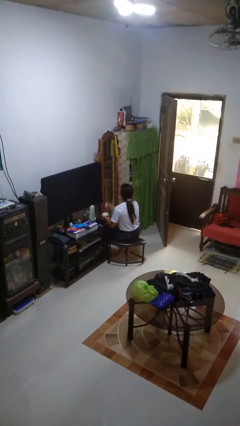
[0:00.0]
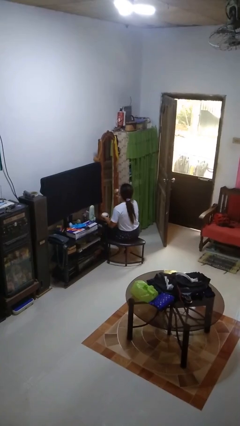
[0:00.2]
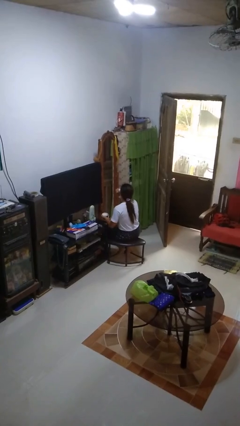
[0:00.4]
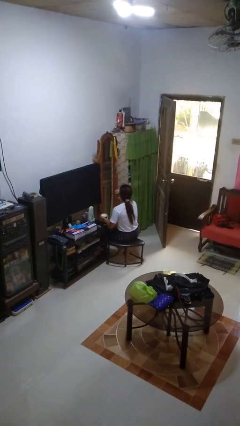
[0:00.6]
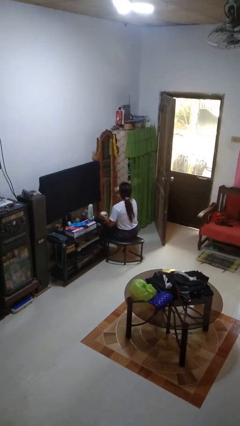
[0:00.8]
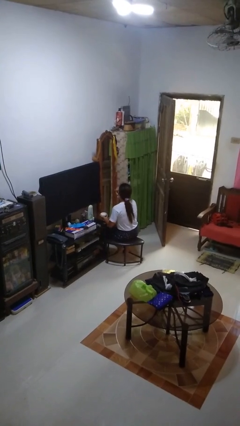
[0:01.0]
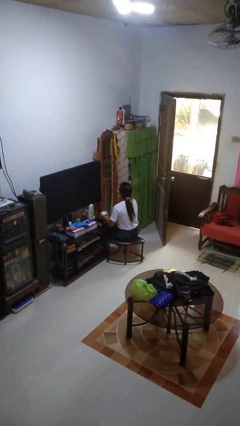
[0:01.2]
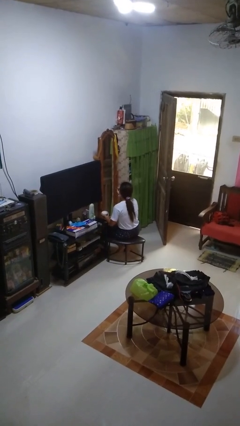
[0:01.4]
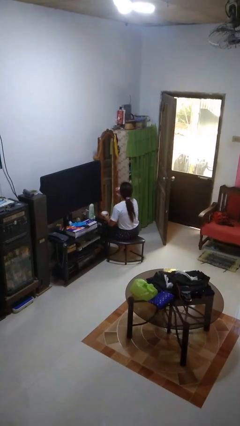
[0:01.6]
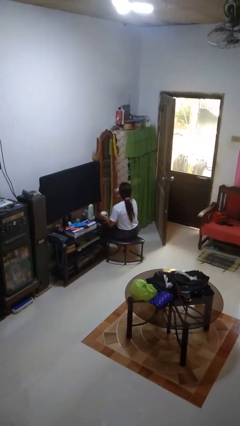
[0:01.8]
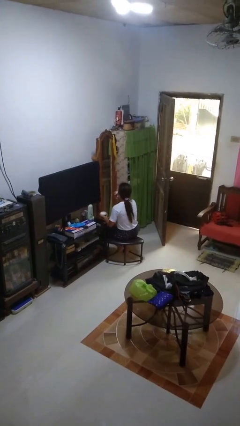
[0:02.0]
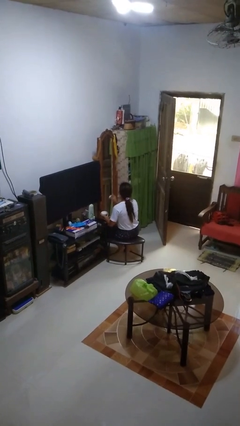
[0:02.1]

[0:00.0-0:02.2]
person applies foundation makeup

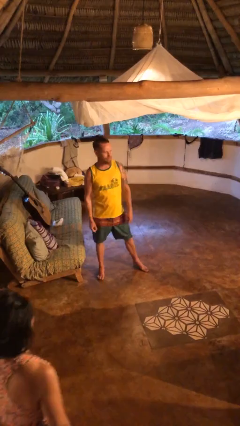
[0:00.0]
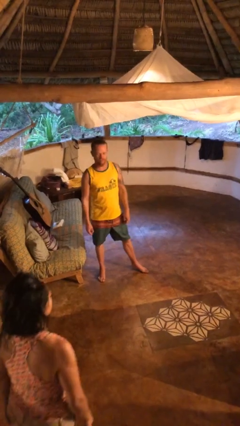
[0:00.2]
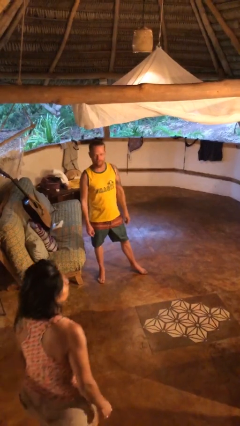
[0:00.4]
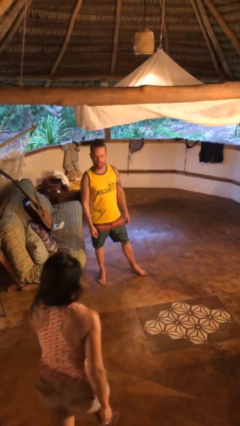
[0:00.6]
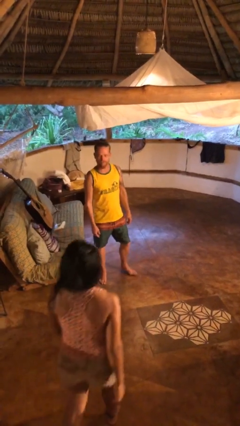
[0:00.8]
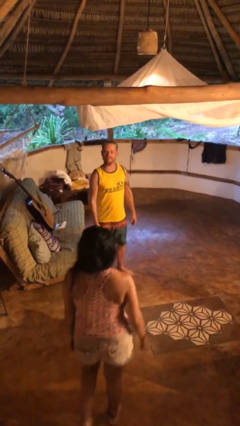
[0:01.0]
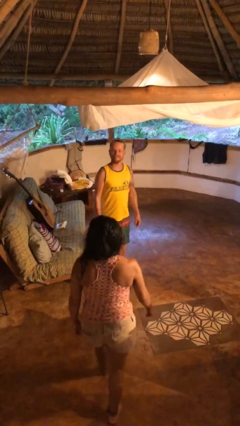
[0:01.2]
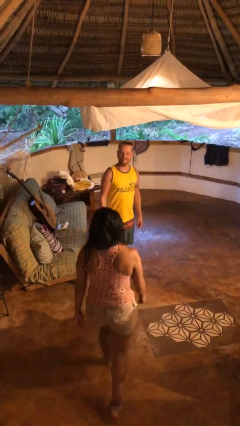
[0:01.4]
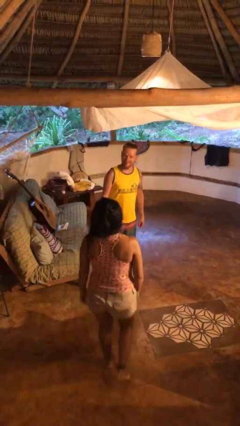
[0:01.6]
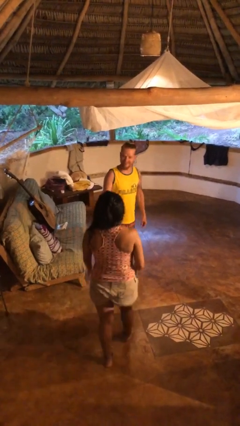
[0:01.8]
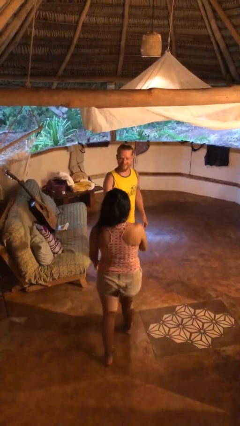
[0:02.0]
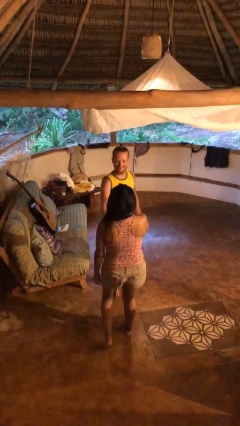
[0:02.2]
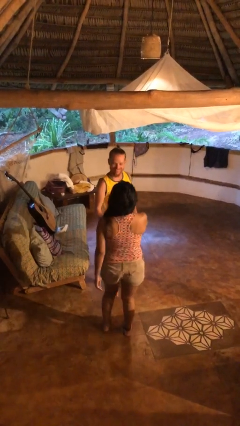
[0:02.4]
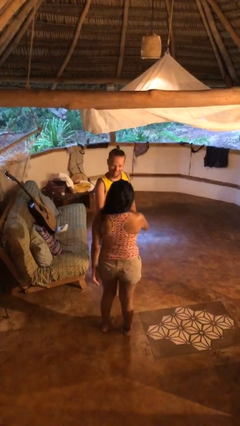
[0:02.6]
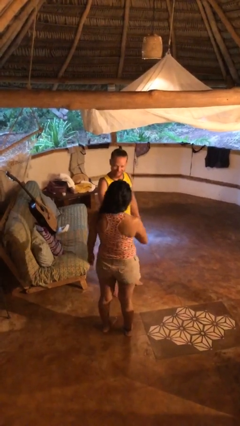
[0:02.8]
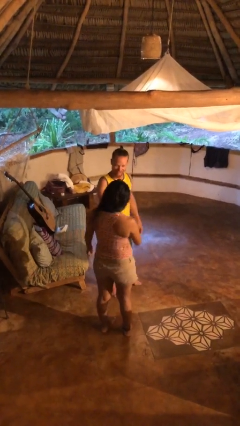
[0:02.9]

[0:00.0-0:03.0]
person shakes hand

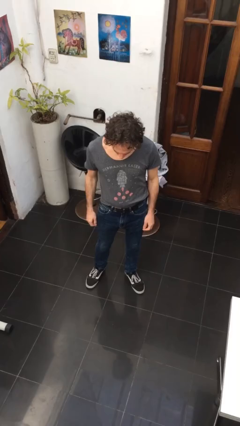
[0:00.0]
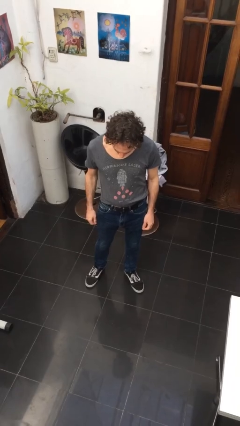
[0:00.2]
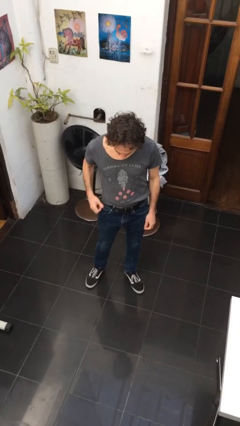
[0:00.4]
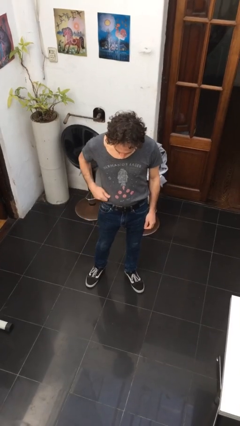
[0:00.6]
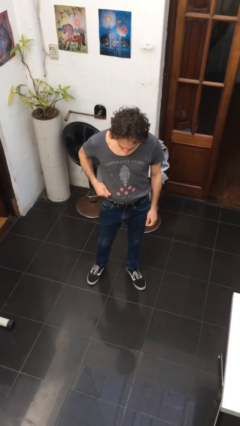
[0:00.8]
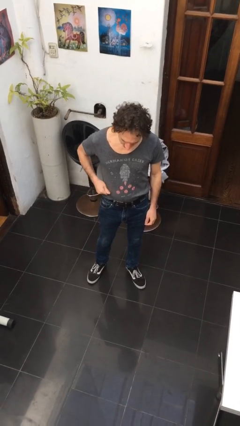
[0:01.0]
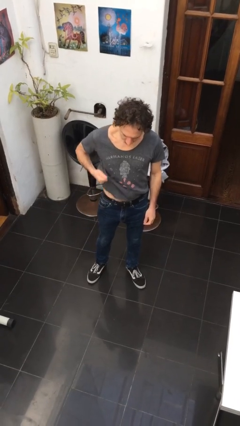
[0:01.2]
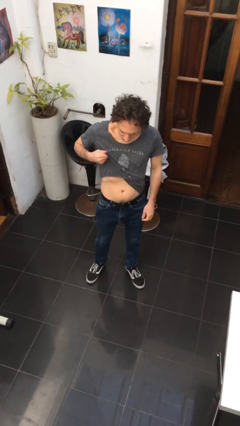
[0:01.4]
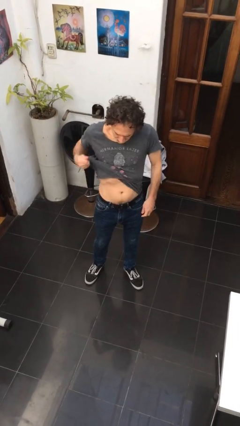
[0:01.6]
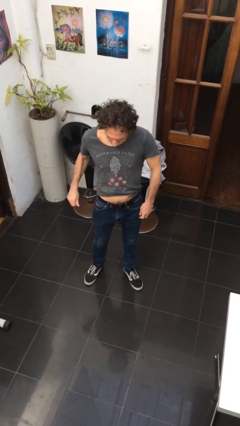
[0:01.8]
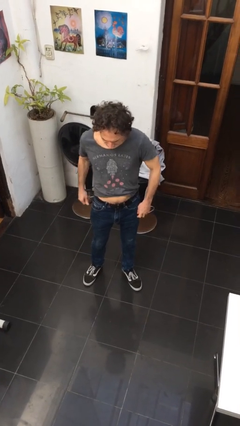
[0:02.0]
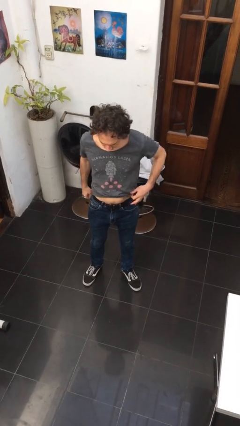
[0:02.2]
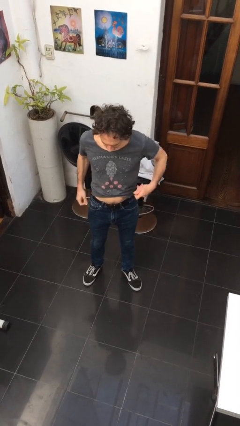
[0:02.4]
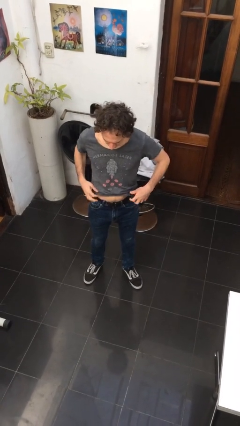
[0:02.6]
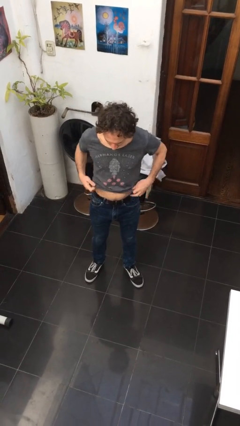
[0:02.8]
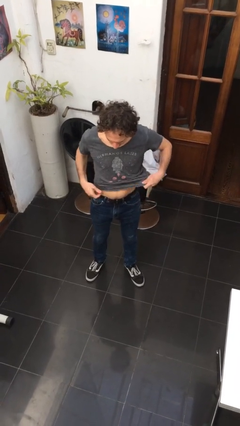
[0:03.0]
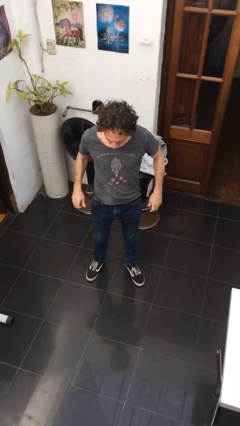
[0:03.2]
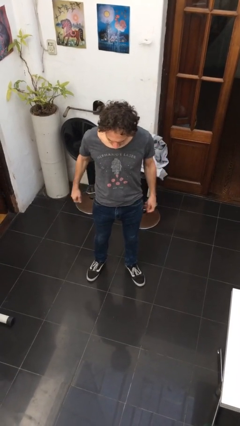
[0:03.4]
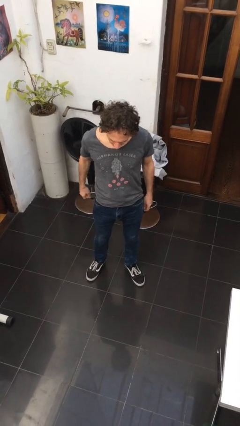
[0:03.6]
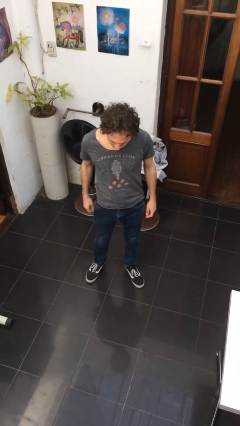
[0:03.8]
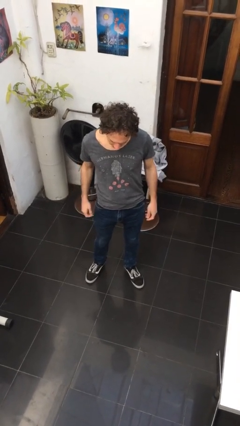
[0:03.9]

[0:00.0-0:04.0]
person untucks shirt

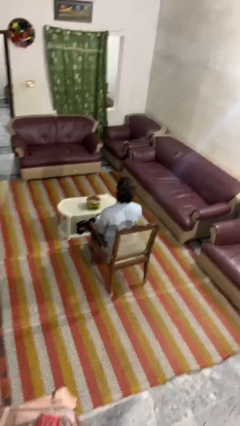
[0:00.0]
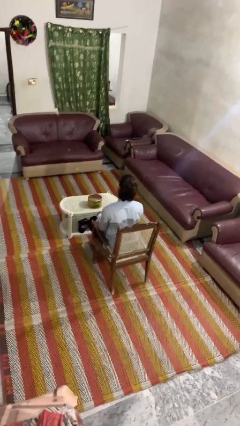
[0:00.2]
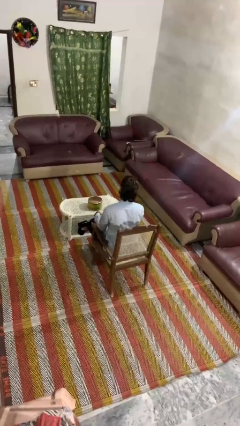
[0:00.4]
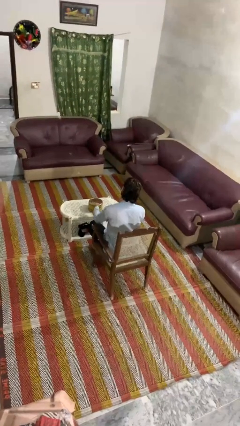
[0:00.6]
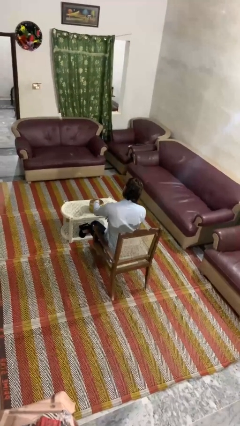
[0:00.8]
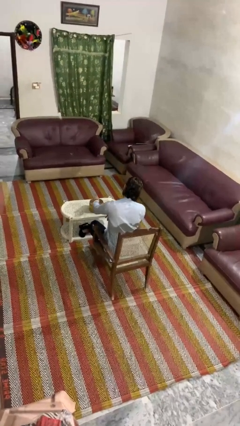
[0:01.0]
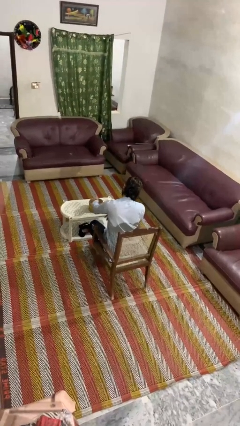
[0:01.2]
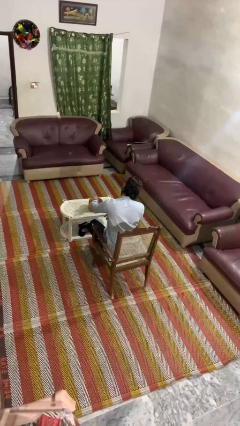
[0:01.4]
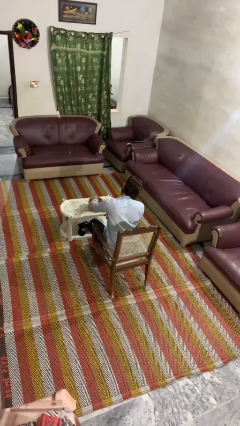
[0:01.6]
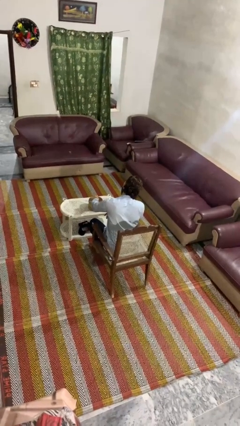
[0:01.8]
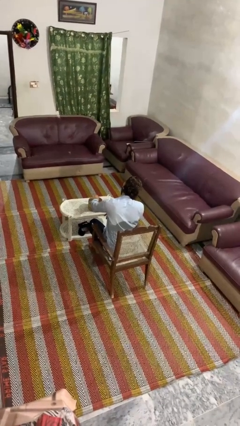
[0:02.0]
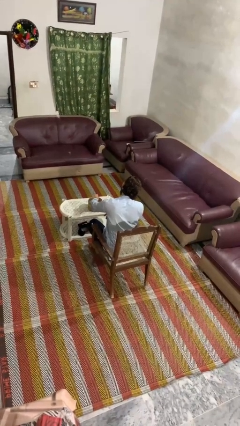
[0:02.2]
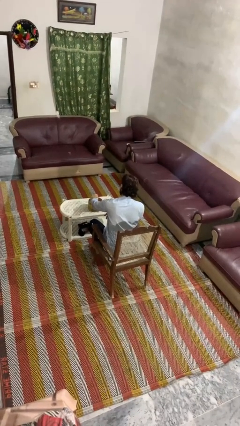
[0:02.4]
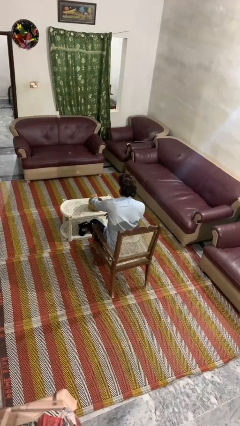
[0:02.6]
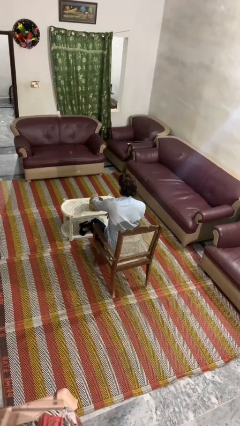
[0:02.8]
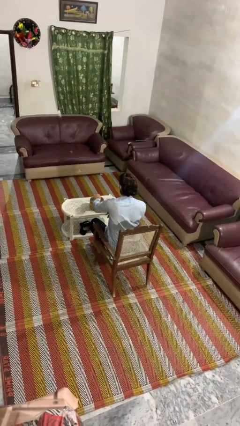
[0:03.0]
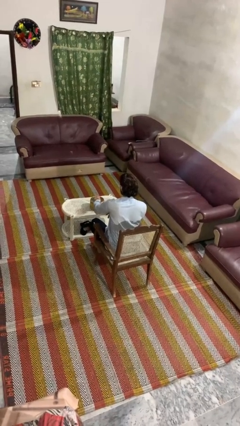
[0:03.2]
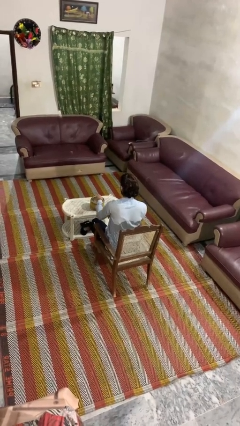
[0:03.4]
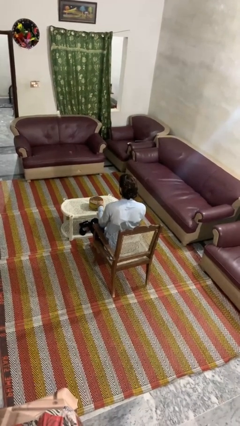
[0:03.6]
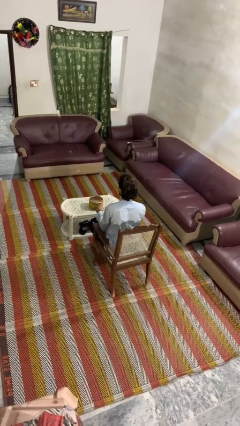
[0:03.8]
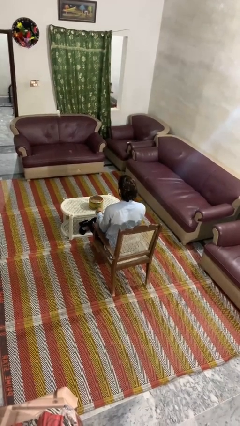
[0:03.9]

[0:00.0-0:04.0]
person taps object with finger

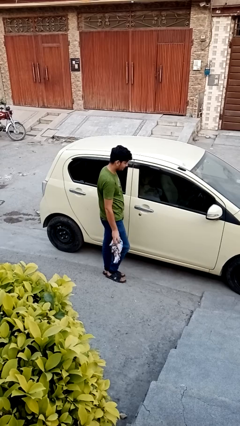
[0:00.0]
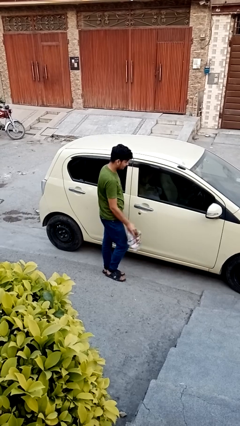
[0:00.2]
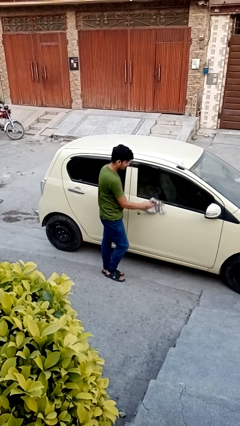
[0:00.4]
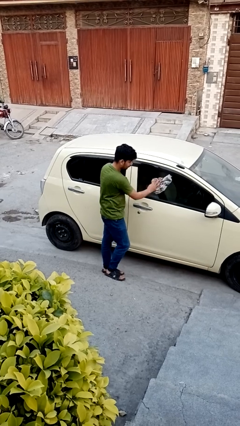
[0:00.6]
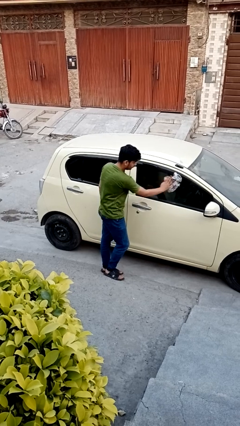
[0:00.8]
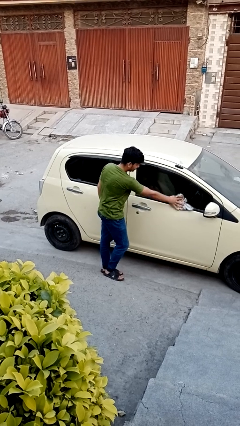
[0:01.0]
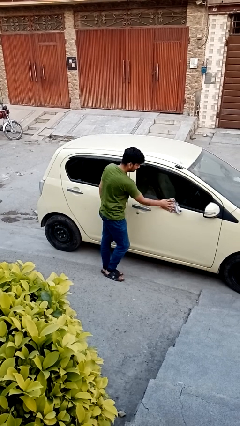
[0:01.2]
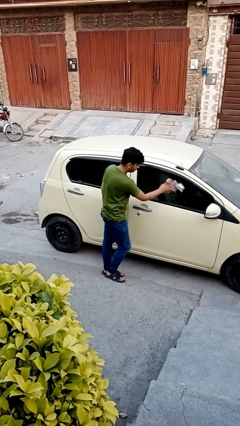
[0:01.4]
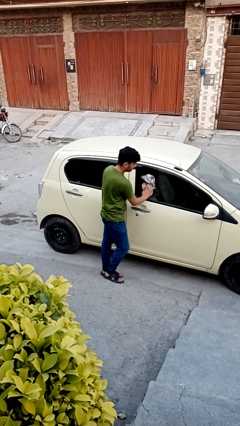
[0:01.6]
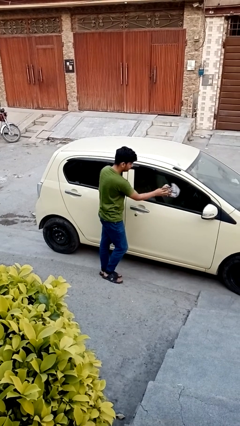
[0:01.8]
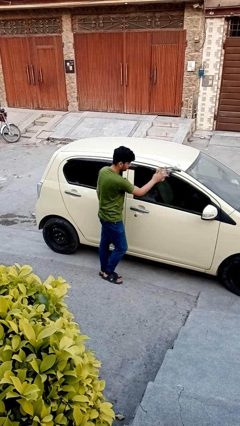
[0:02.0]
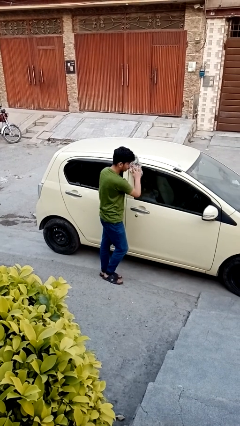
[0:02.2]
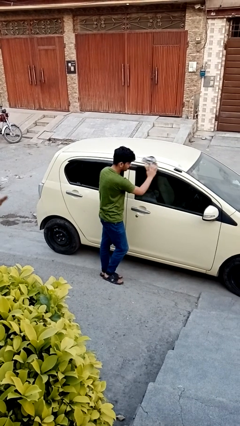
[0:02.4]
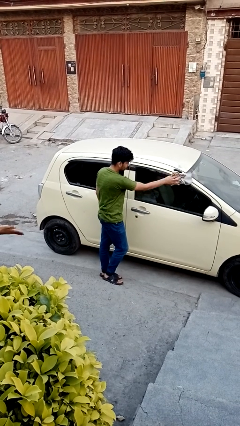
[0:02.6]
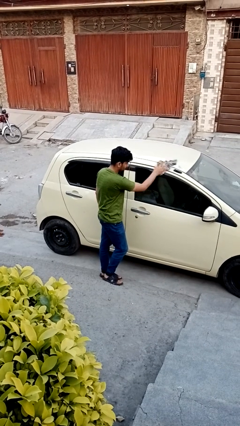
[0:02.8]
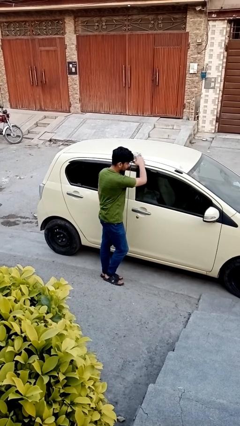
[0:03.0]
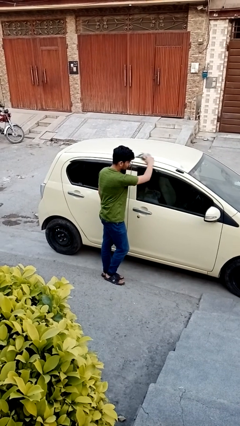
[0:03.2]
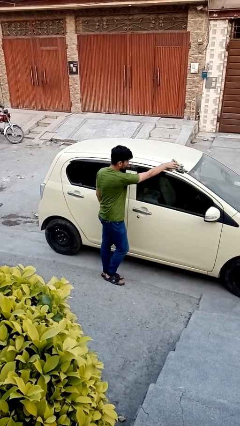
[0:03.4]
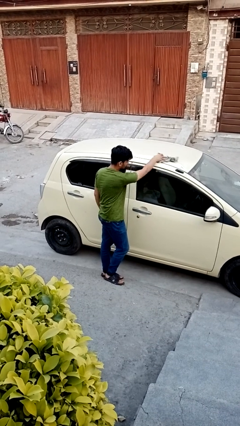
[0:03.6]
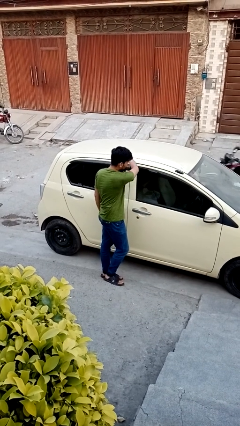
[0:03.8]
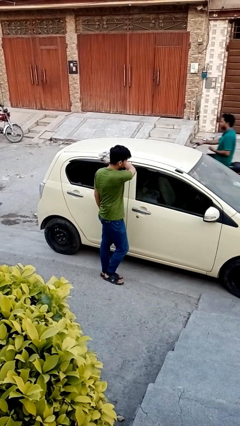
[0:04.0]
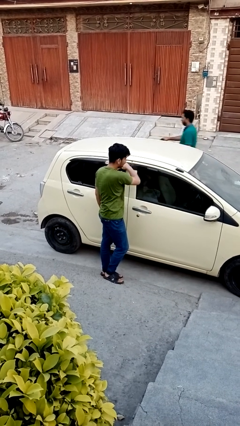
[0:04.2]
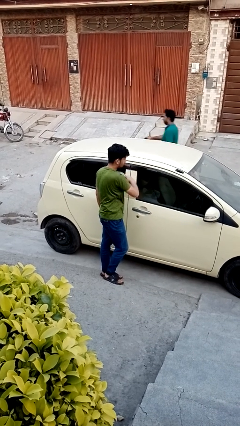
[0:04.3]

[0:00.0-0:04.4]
person polishes car with rag
